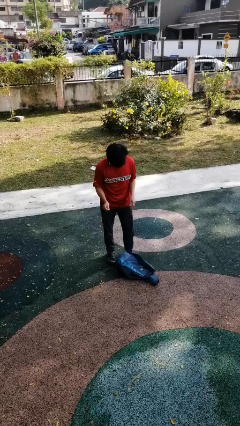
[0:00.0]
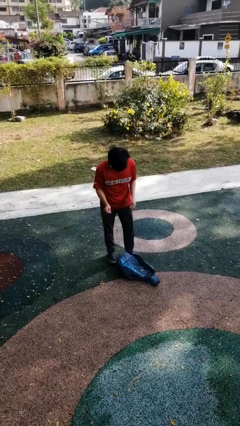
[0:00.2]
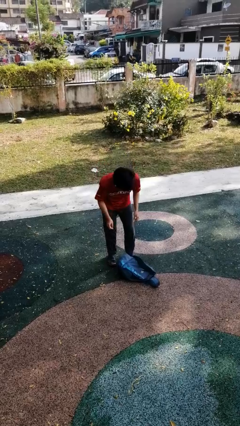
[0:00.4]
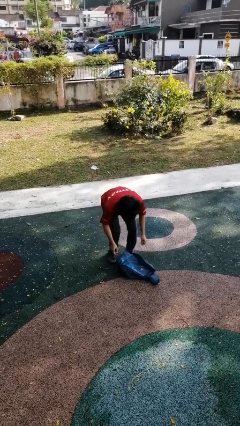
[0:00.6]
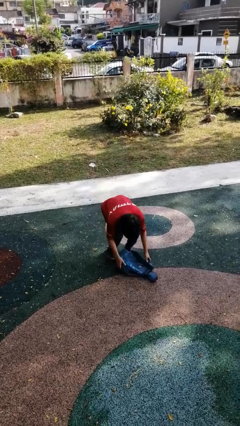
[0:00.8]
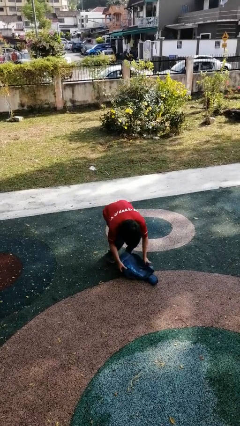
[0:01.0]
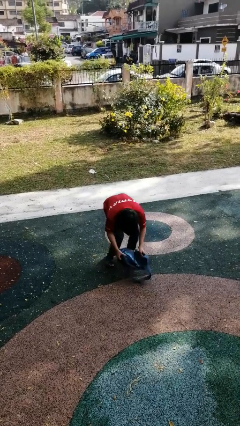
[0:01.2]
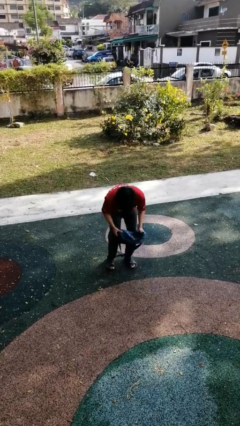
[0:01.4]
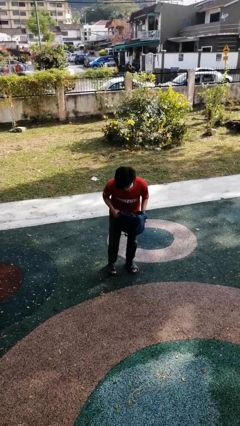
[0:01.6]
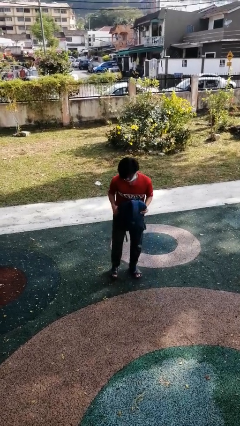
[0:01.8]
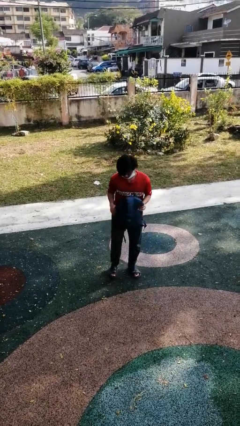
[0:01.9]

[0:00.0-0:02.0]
person picks up object from floor

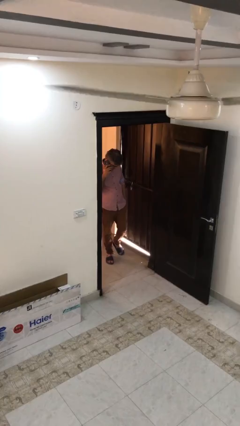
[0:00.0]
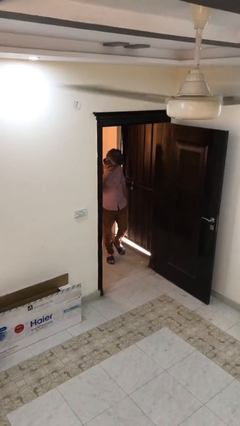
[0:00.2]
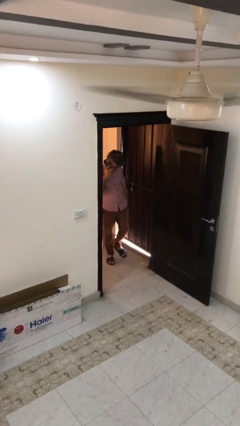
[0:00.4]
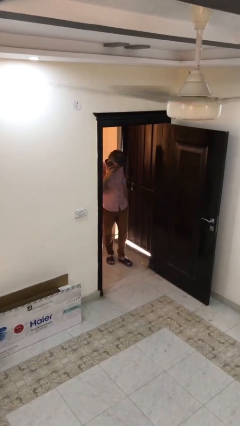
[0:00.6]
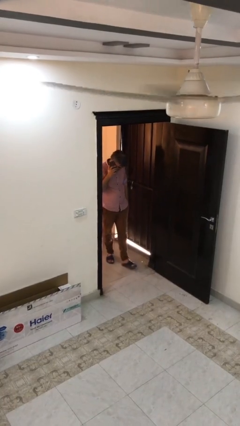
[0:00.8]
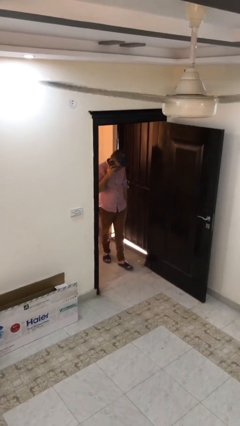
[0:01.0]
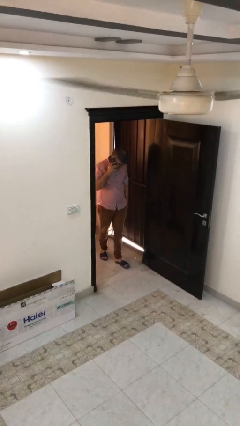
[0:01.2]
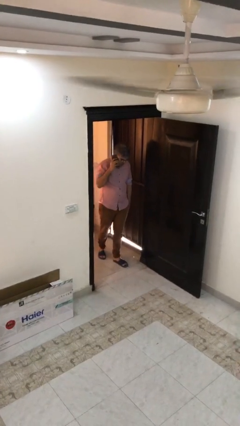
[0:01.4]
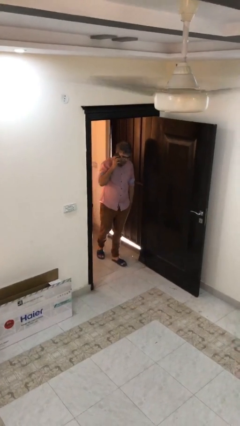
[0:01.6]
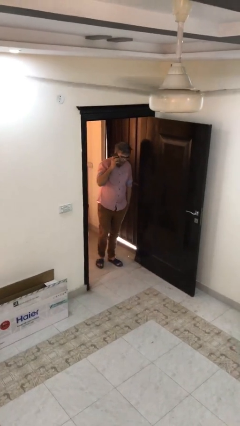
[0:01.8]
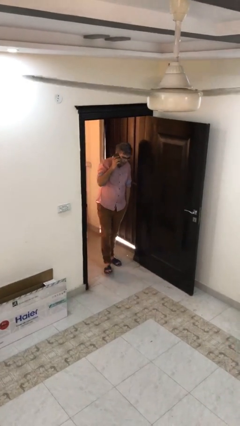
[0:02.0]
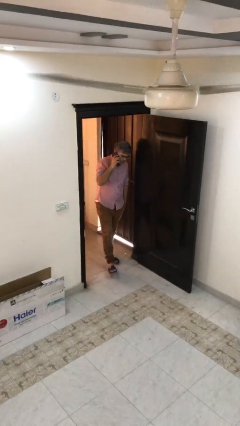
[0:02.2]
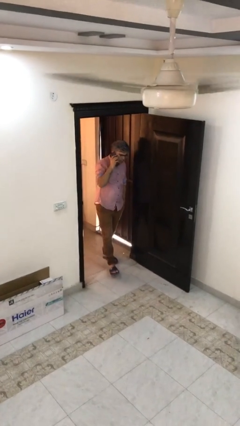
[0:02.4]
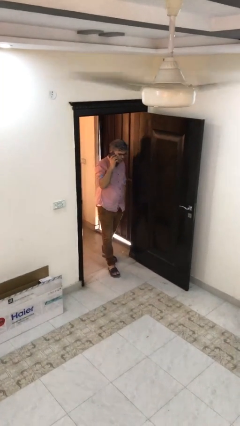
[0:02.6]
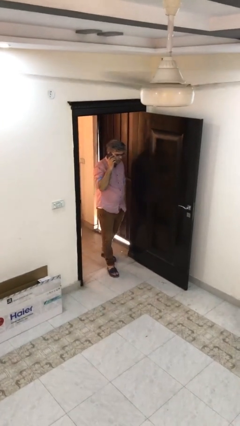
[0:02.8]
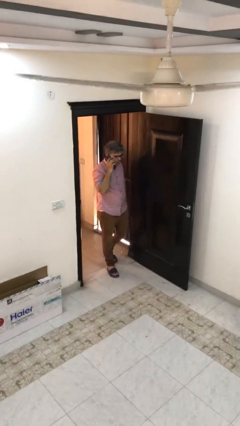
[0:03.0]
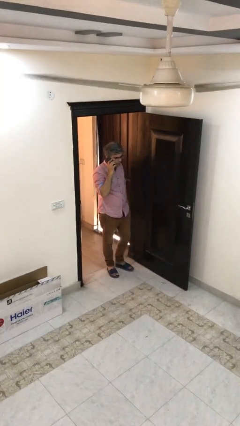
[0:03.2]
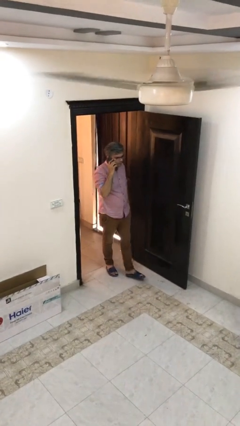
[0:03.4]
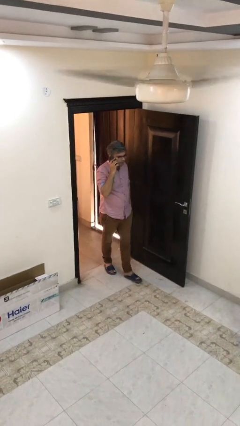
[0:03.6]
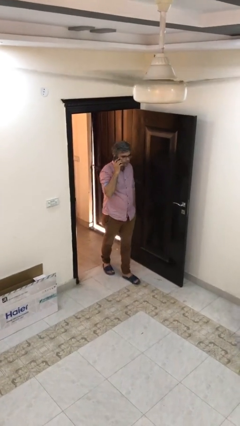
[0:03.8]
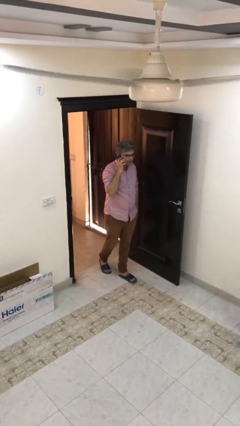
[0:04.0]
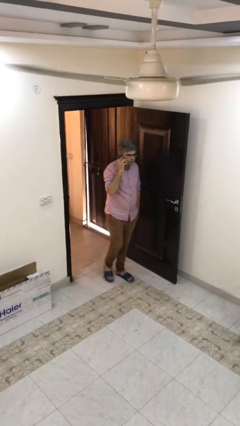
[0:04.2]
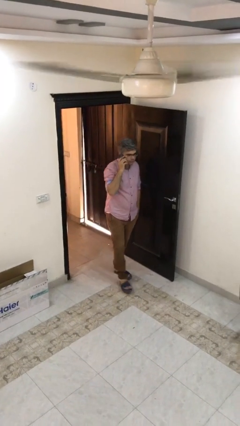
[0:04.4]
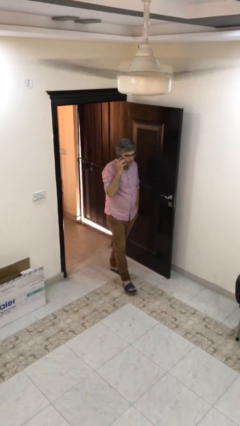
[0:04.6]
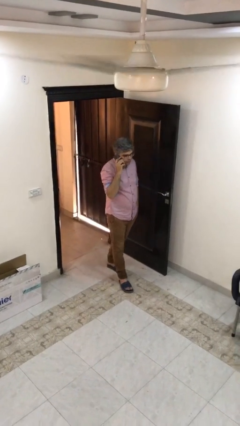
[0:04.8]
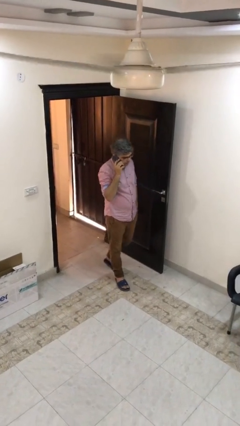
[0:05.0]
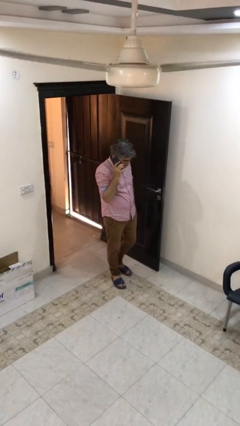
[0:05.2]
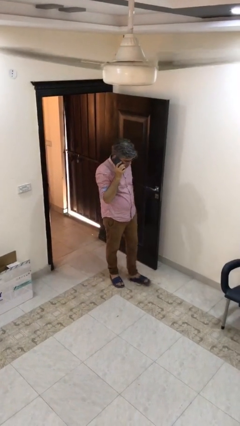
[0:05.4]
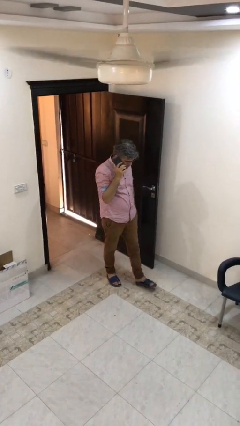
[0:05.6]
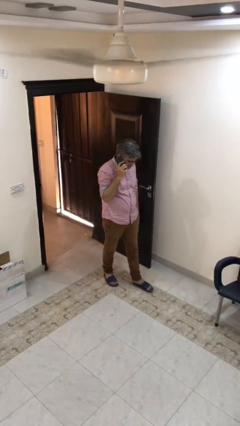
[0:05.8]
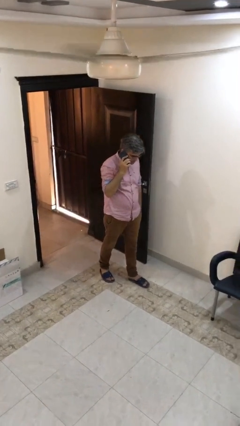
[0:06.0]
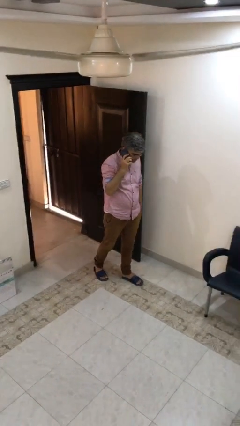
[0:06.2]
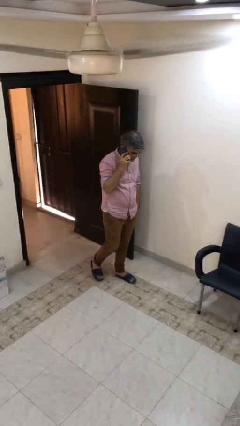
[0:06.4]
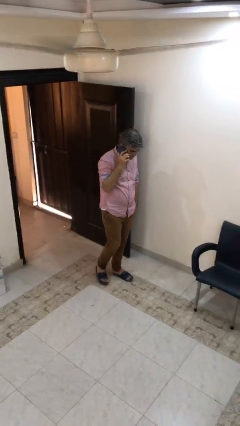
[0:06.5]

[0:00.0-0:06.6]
person enters scene through structure
